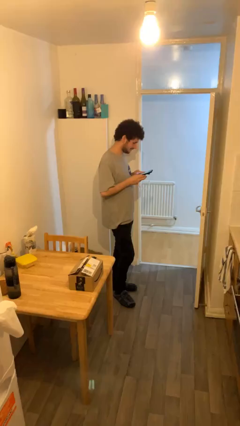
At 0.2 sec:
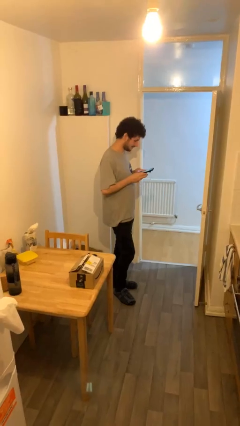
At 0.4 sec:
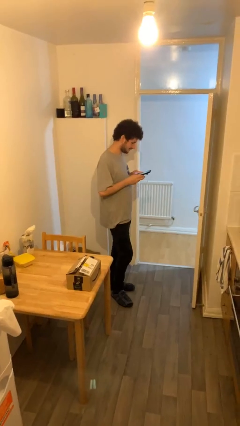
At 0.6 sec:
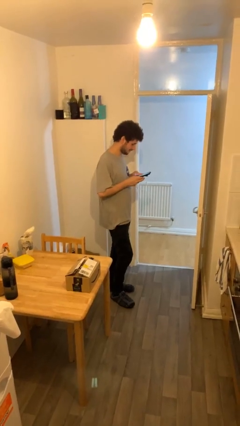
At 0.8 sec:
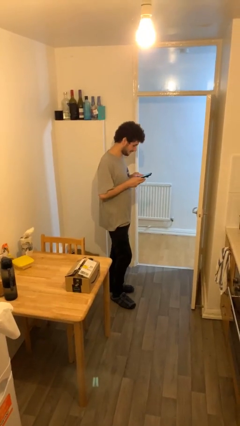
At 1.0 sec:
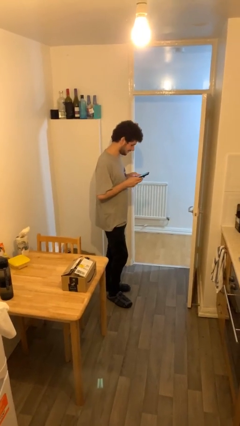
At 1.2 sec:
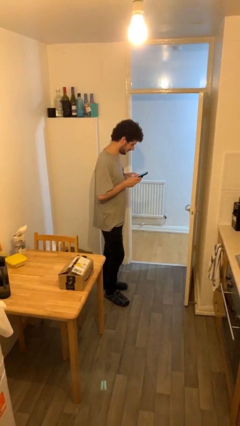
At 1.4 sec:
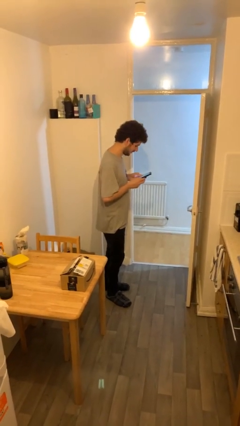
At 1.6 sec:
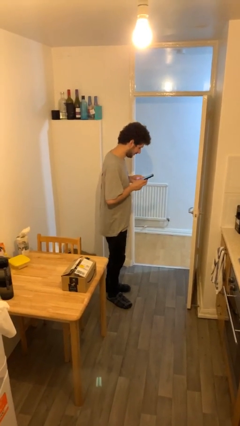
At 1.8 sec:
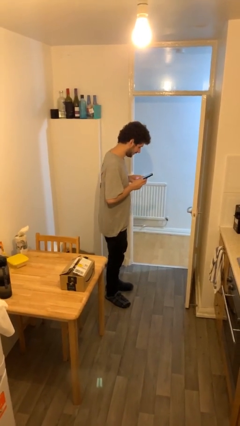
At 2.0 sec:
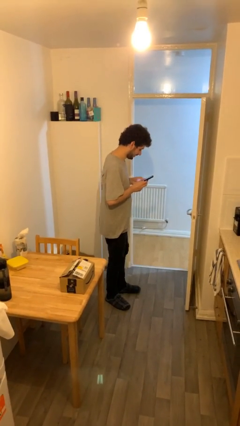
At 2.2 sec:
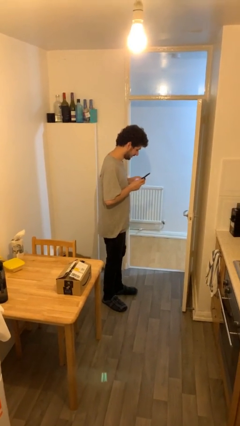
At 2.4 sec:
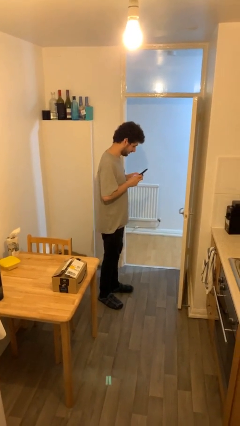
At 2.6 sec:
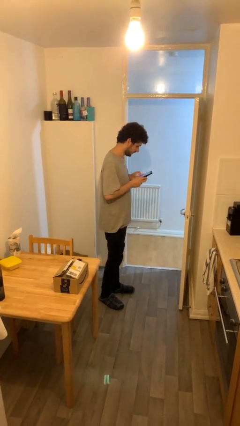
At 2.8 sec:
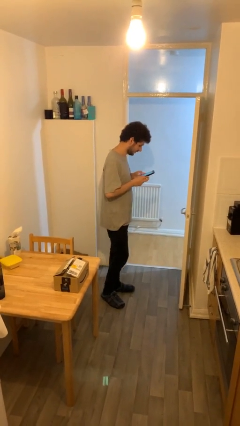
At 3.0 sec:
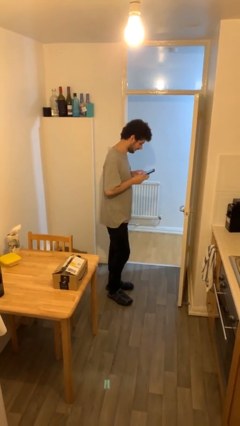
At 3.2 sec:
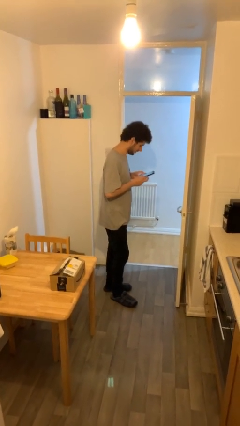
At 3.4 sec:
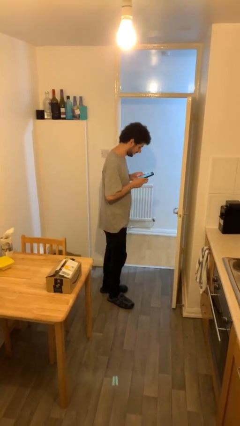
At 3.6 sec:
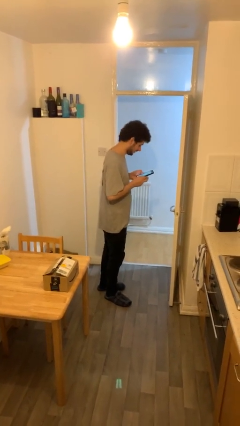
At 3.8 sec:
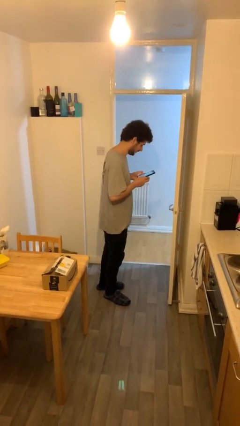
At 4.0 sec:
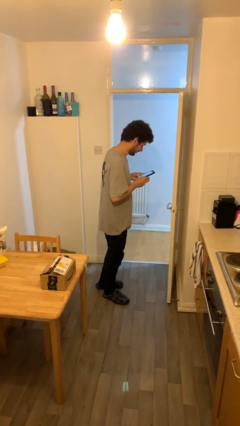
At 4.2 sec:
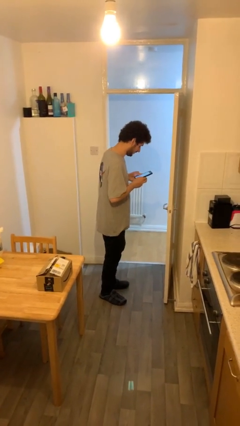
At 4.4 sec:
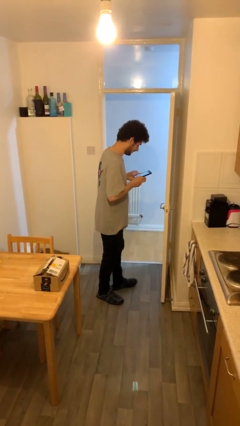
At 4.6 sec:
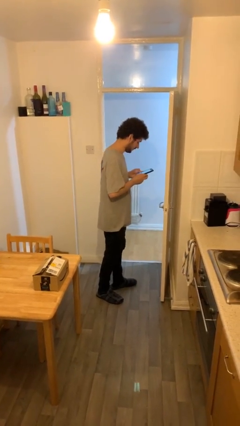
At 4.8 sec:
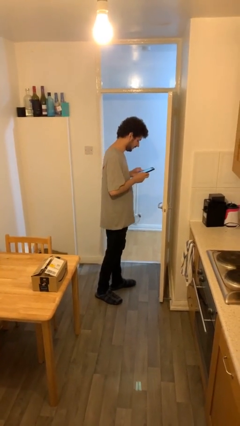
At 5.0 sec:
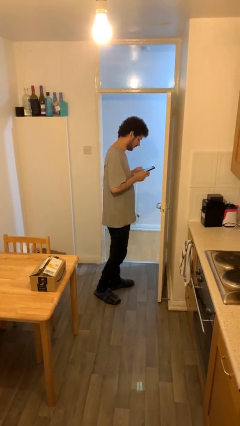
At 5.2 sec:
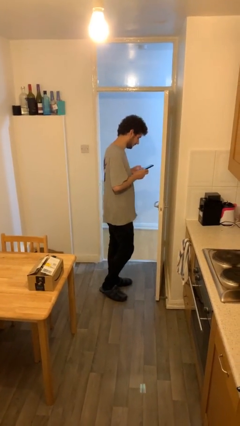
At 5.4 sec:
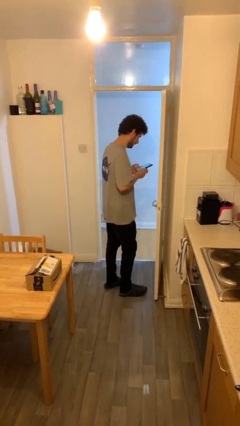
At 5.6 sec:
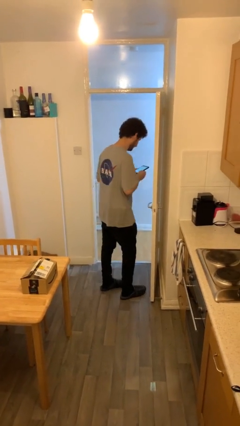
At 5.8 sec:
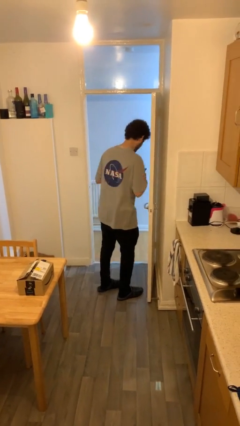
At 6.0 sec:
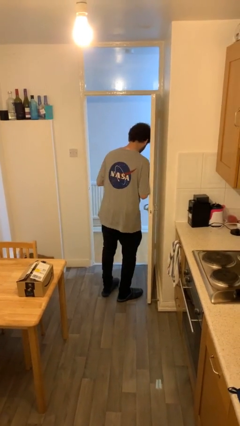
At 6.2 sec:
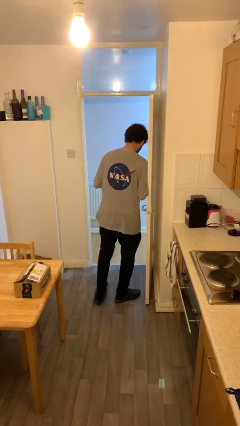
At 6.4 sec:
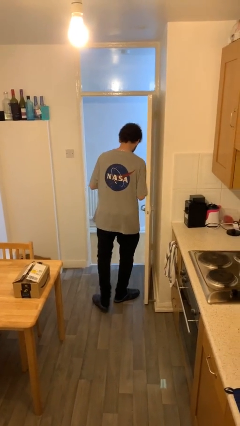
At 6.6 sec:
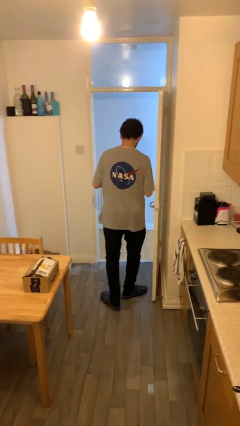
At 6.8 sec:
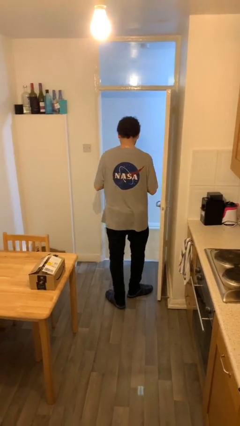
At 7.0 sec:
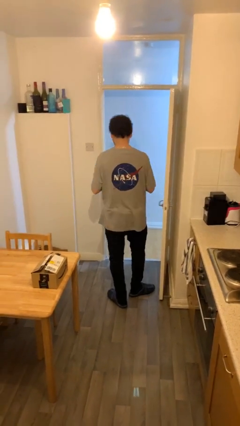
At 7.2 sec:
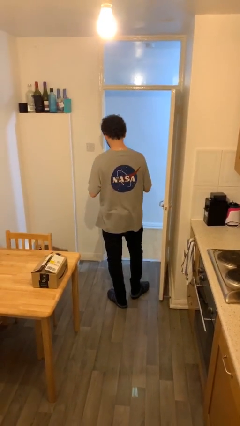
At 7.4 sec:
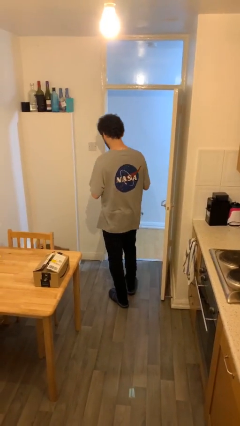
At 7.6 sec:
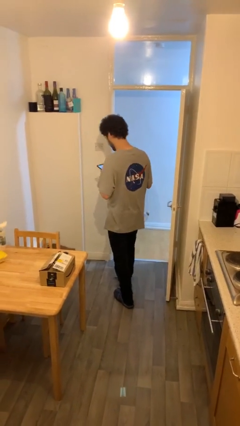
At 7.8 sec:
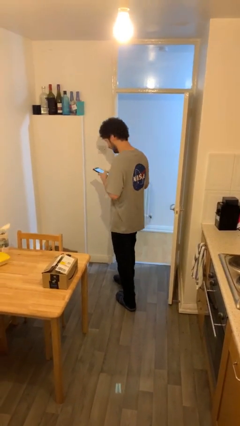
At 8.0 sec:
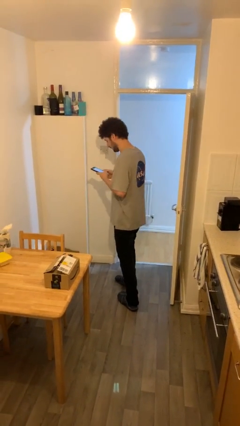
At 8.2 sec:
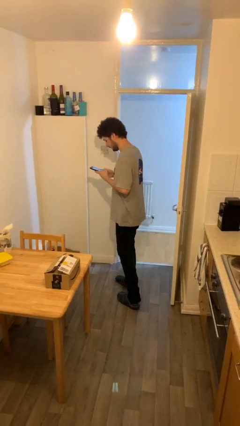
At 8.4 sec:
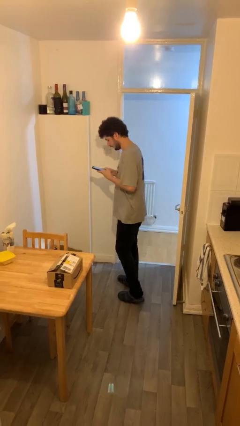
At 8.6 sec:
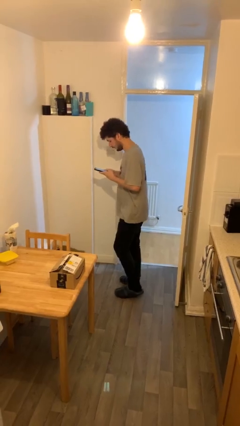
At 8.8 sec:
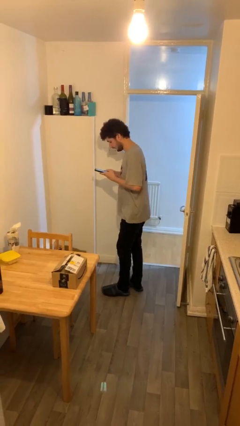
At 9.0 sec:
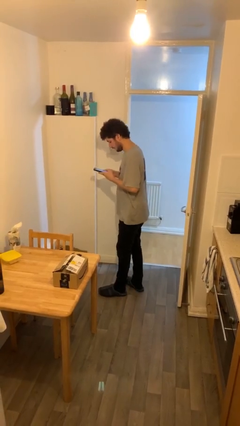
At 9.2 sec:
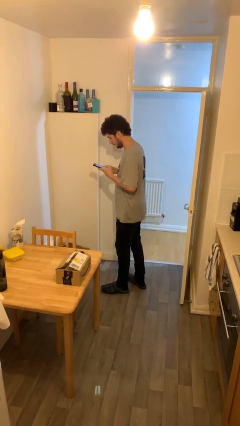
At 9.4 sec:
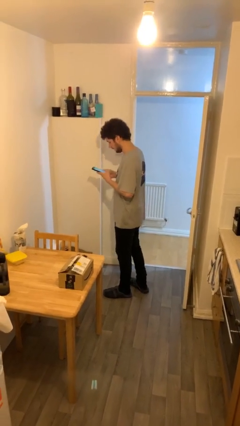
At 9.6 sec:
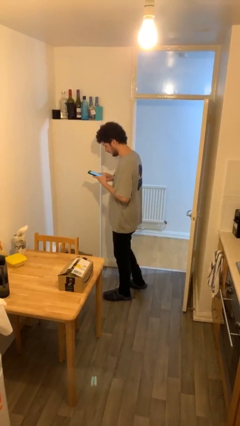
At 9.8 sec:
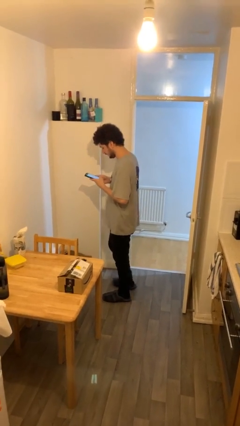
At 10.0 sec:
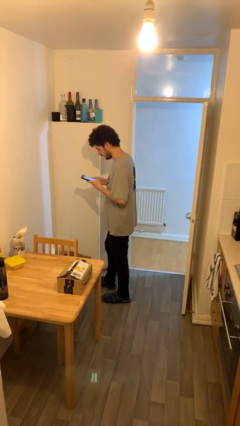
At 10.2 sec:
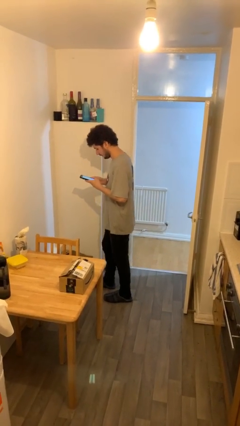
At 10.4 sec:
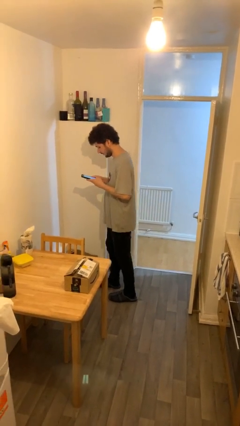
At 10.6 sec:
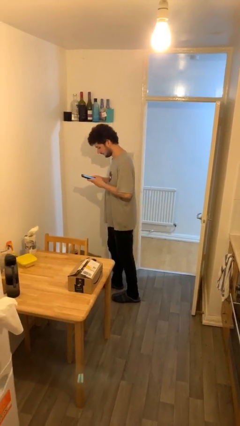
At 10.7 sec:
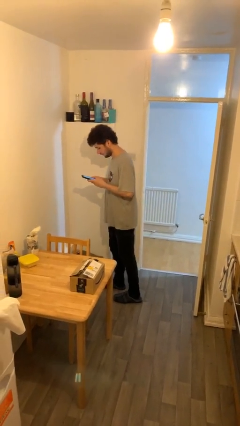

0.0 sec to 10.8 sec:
person texts on phone

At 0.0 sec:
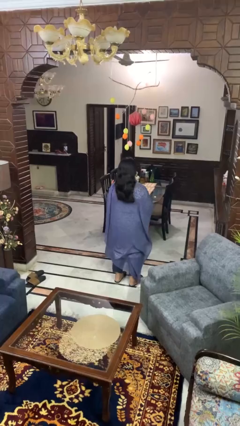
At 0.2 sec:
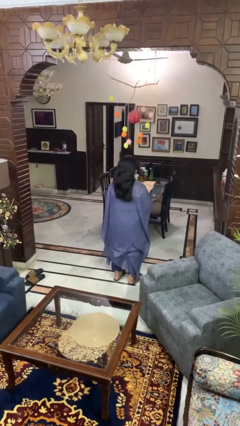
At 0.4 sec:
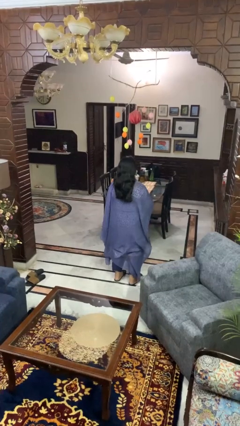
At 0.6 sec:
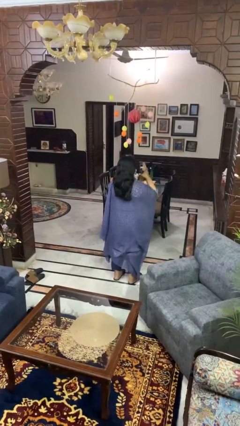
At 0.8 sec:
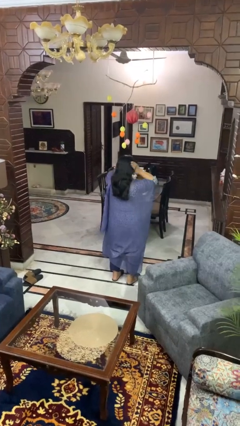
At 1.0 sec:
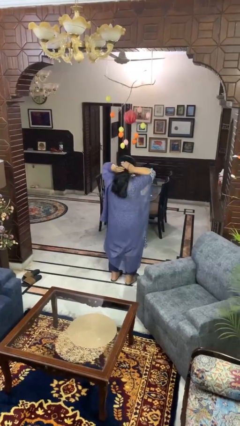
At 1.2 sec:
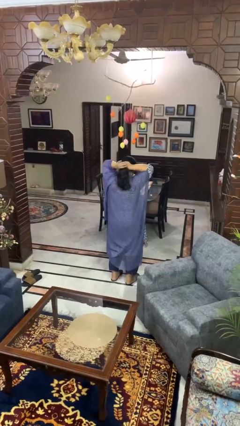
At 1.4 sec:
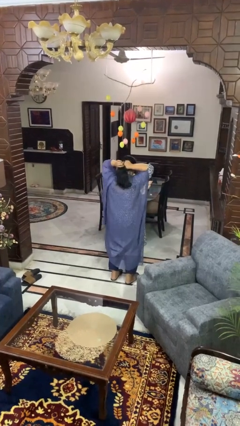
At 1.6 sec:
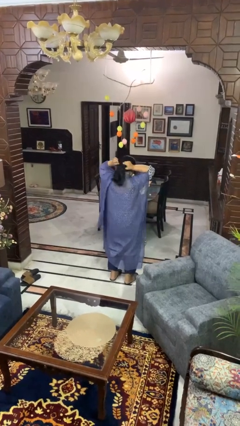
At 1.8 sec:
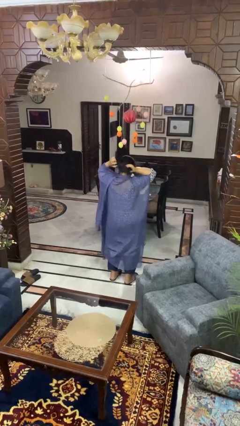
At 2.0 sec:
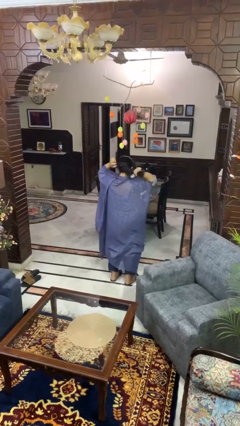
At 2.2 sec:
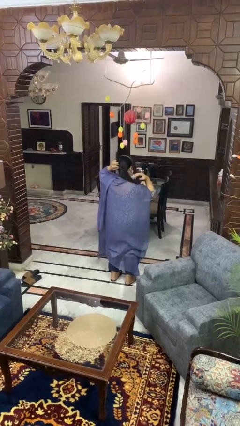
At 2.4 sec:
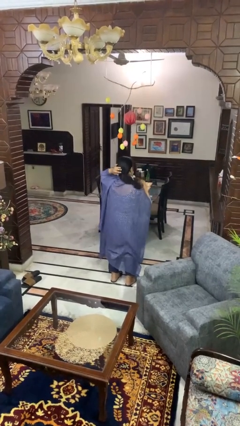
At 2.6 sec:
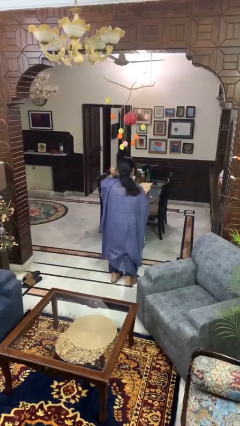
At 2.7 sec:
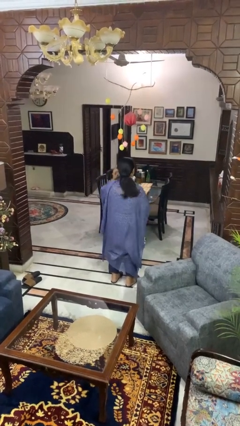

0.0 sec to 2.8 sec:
person puts hair in ponytail

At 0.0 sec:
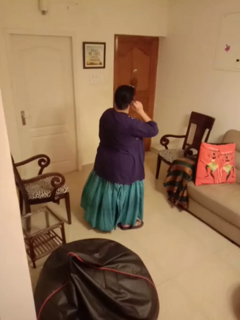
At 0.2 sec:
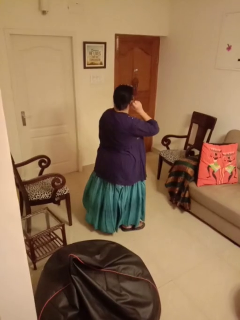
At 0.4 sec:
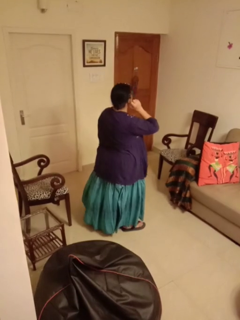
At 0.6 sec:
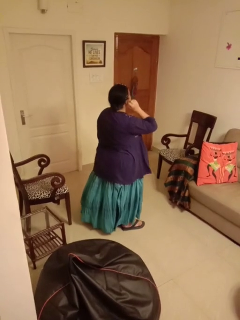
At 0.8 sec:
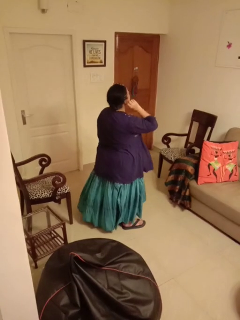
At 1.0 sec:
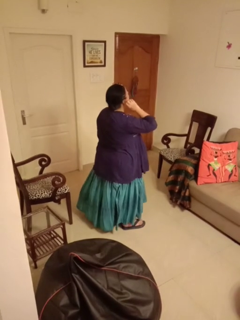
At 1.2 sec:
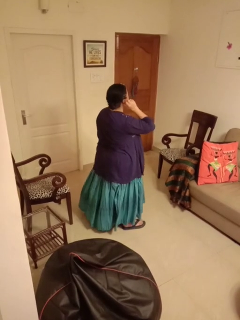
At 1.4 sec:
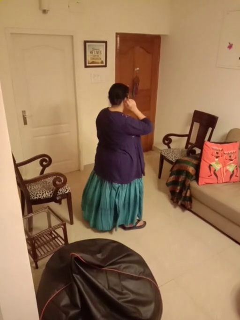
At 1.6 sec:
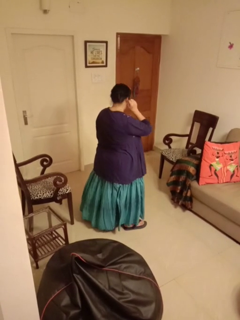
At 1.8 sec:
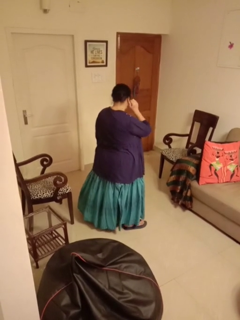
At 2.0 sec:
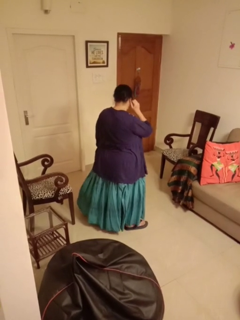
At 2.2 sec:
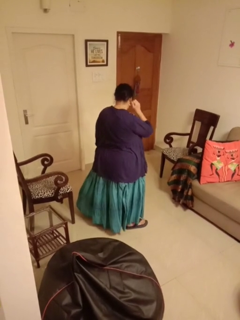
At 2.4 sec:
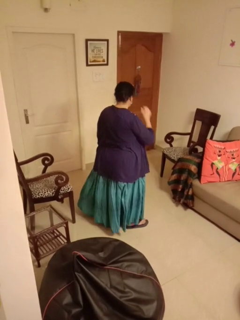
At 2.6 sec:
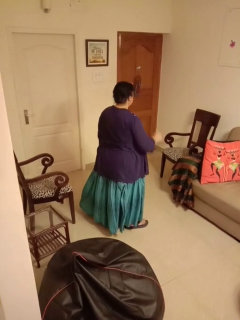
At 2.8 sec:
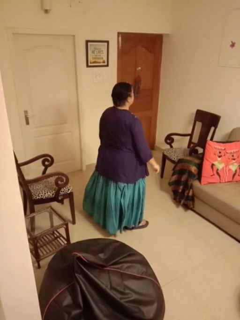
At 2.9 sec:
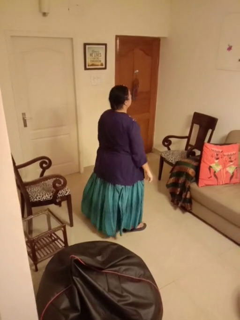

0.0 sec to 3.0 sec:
person touches earlobe

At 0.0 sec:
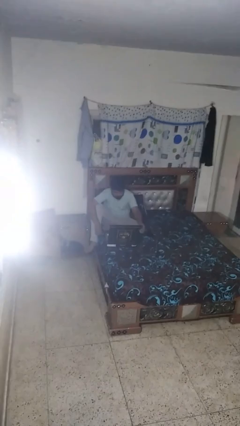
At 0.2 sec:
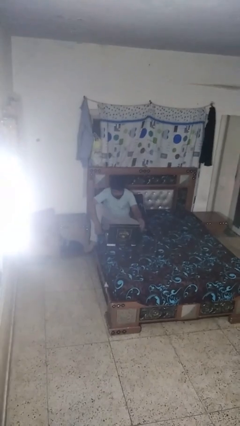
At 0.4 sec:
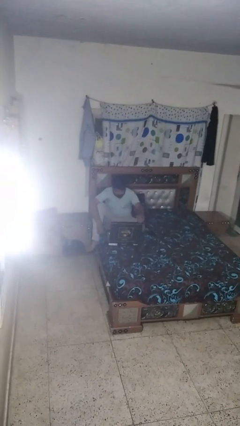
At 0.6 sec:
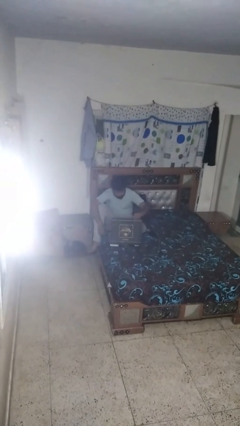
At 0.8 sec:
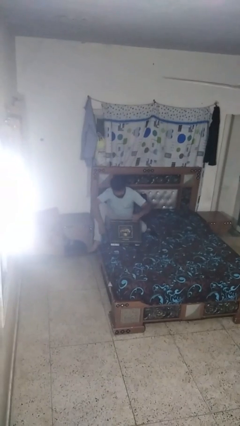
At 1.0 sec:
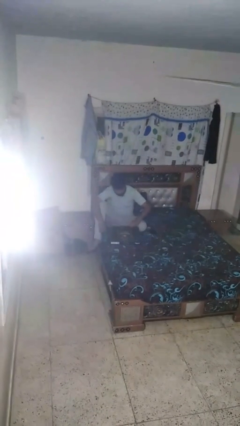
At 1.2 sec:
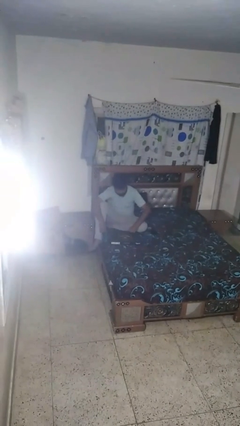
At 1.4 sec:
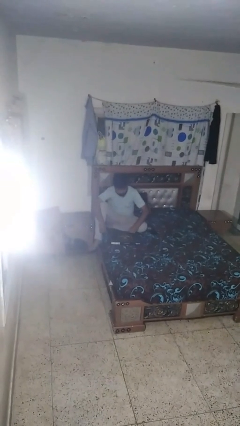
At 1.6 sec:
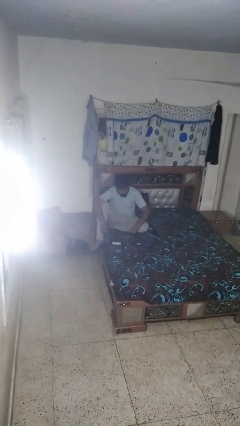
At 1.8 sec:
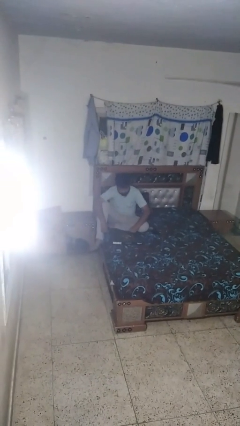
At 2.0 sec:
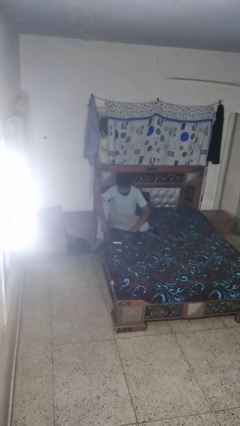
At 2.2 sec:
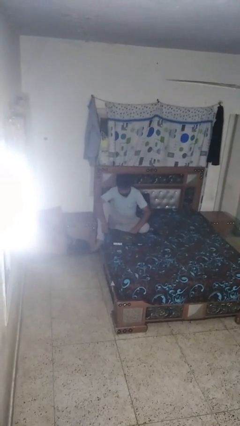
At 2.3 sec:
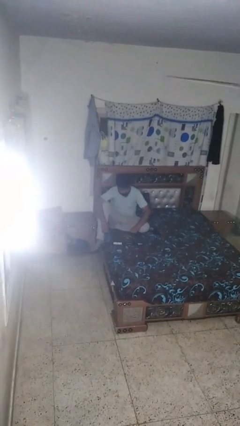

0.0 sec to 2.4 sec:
person closes laptop
